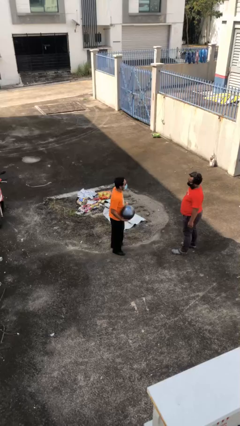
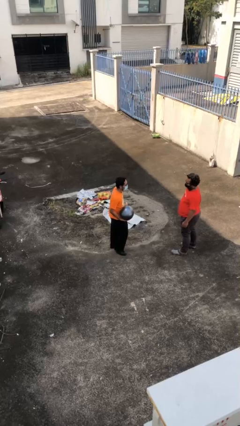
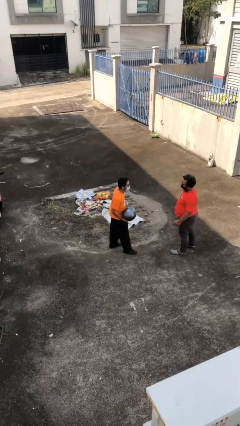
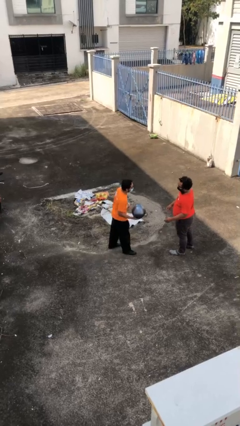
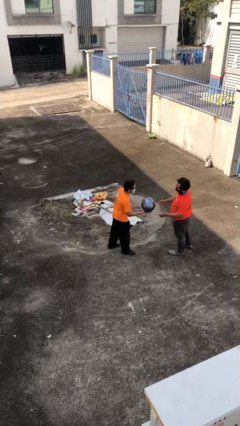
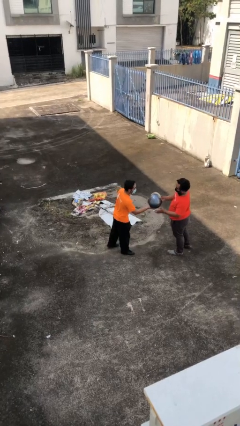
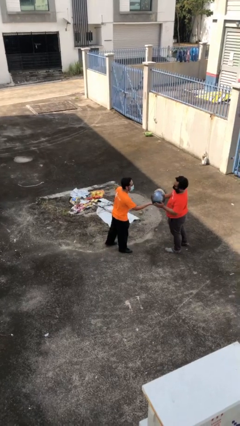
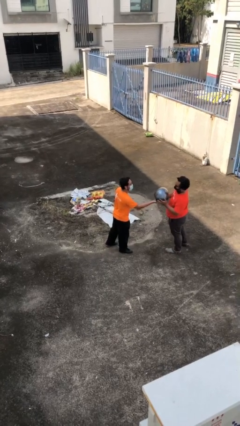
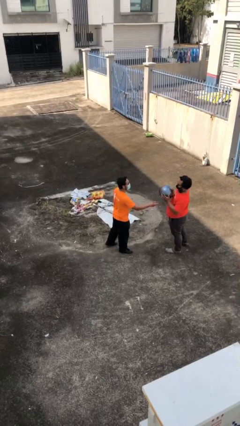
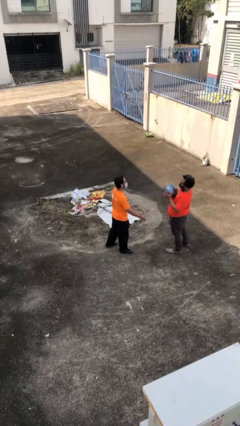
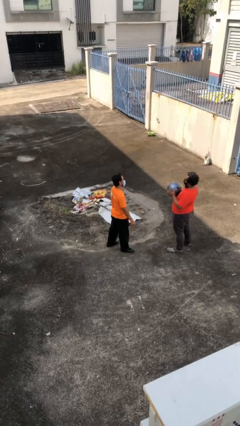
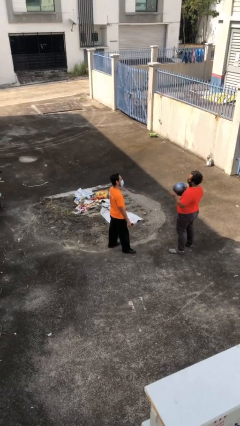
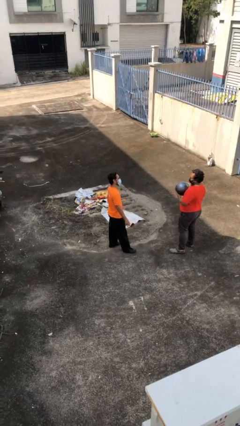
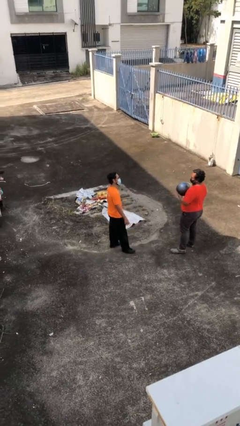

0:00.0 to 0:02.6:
person transfers object to person

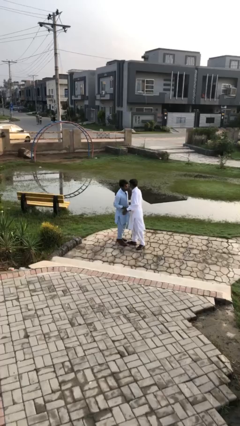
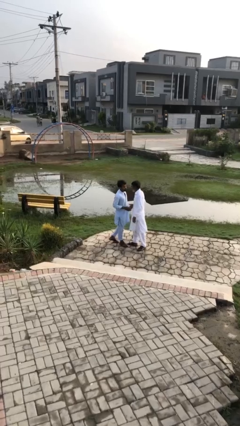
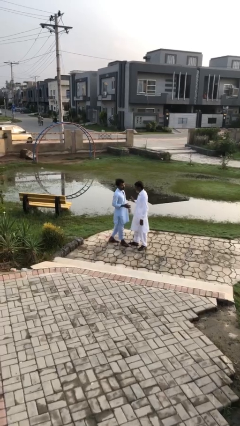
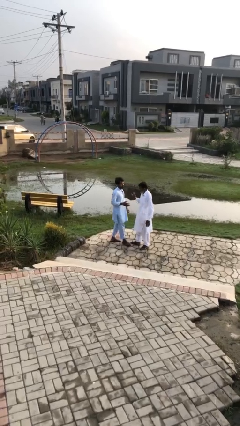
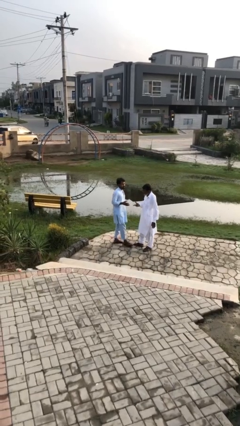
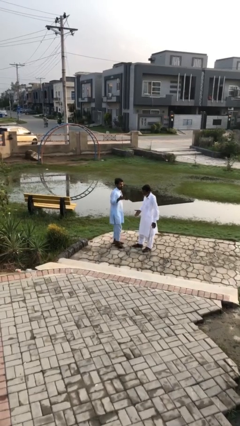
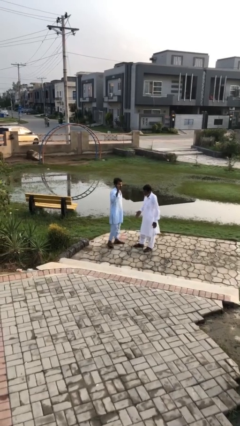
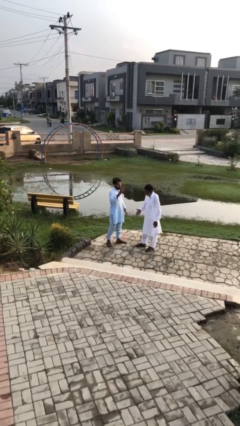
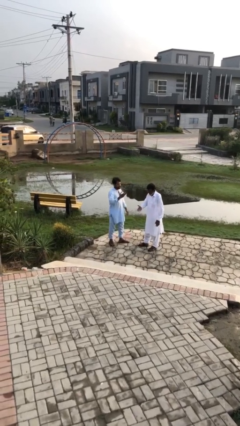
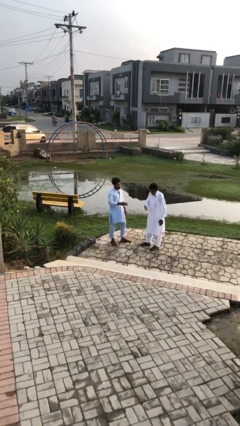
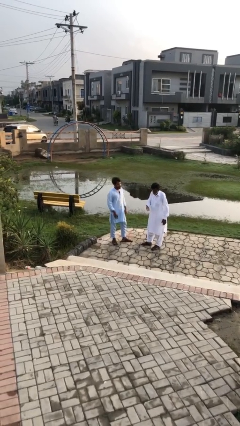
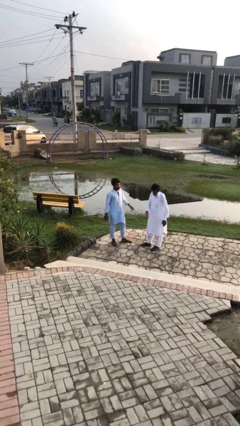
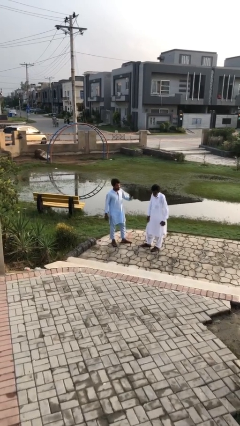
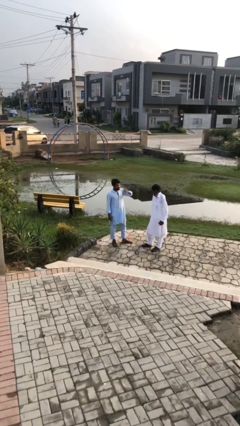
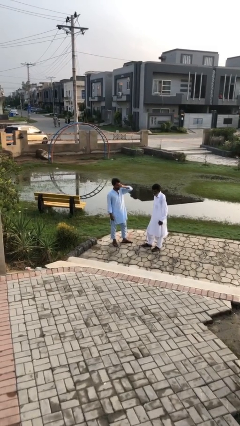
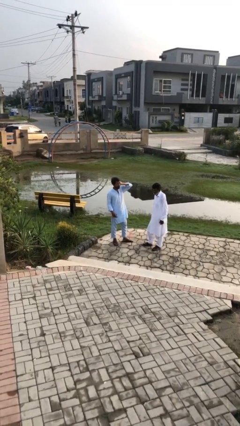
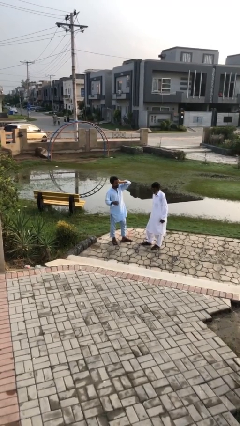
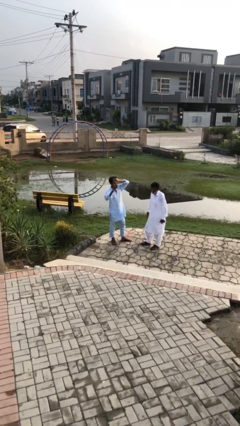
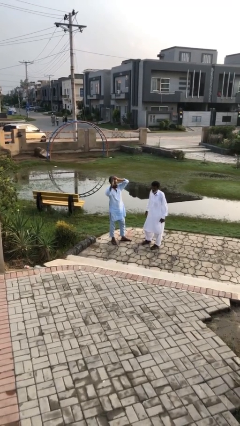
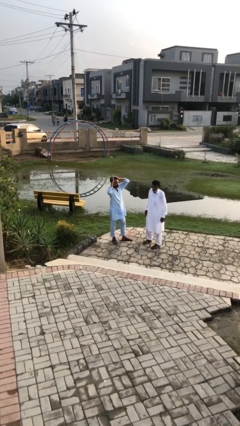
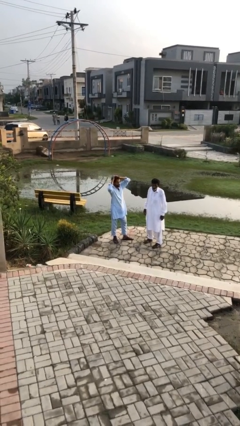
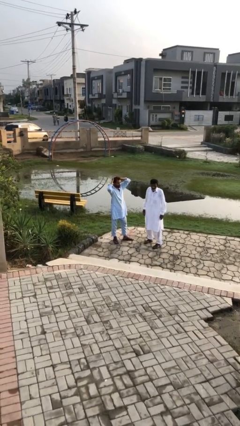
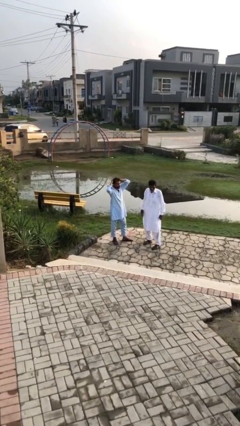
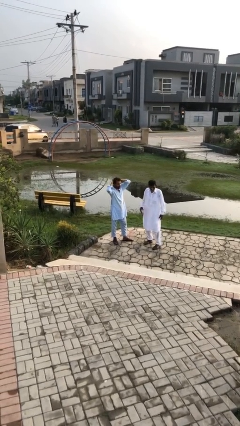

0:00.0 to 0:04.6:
person talks to person

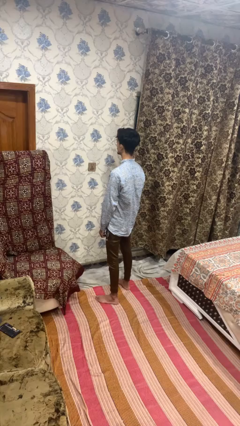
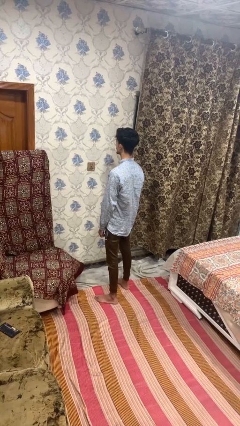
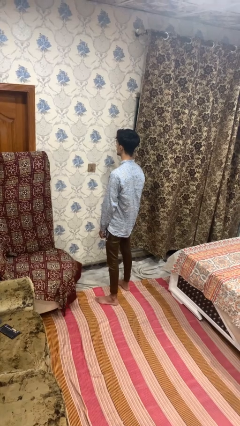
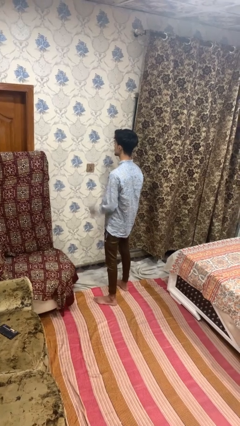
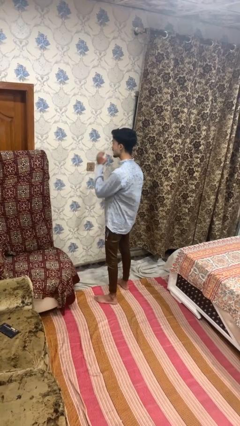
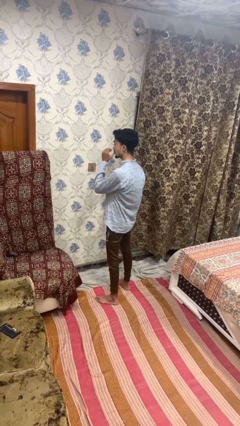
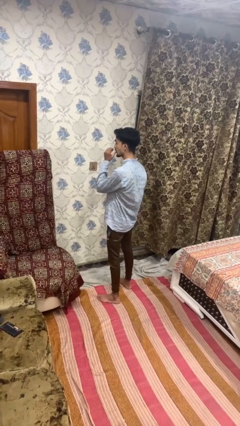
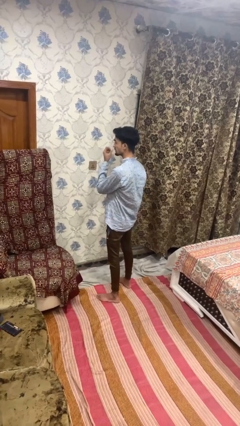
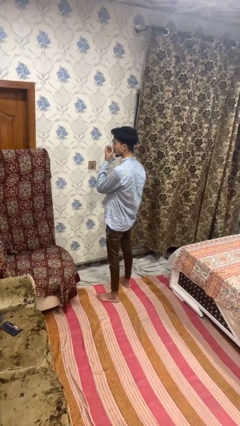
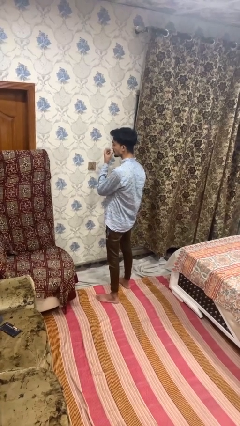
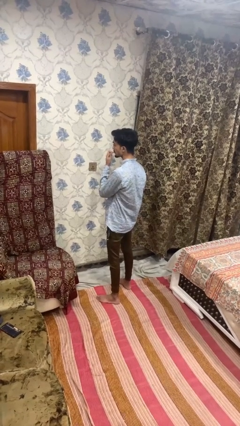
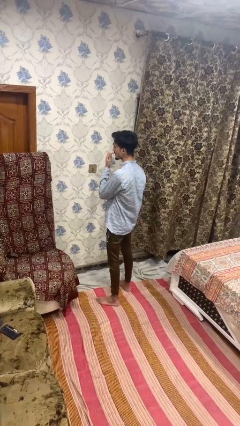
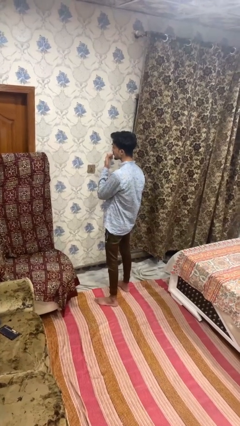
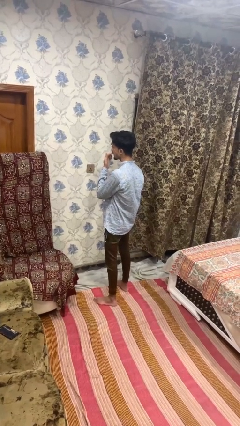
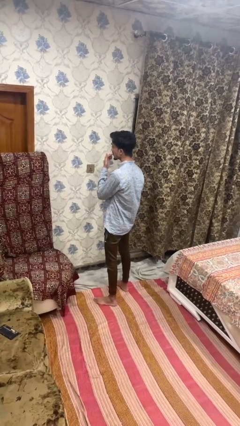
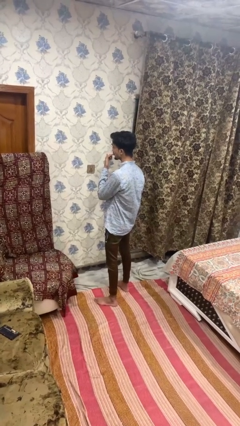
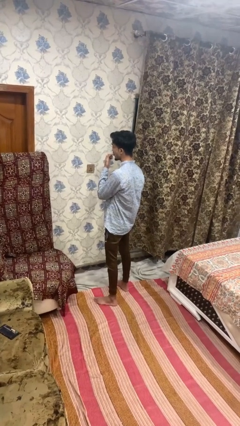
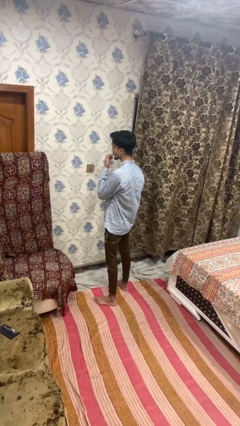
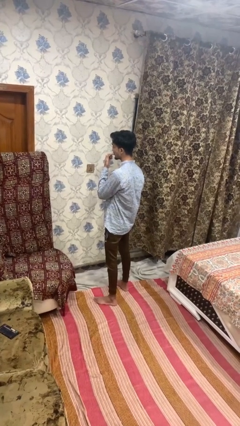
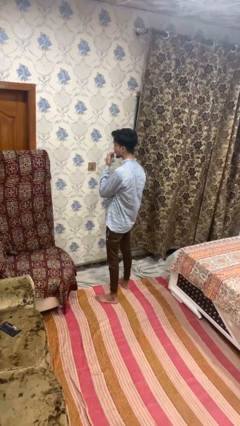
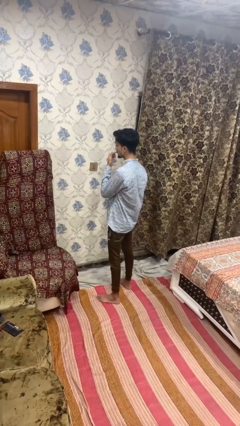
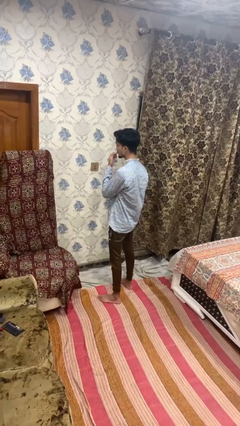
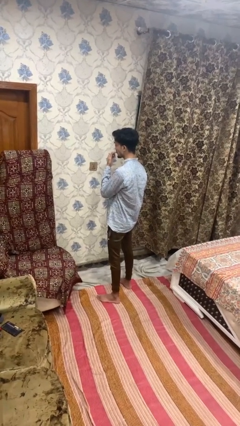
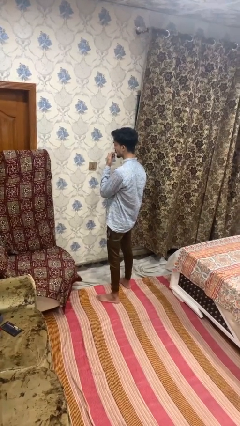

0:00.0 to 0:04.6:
person licks fingers

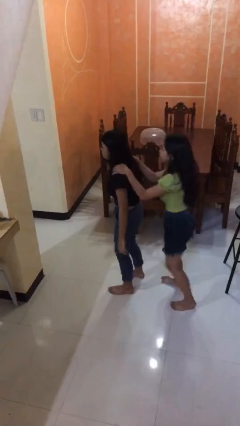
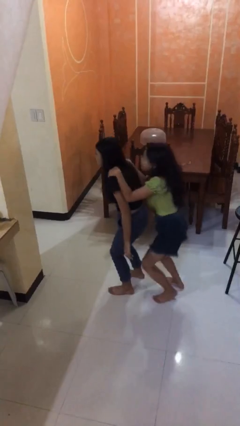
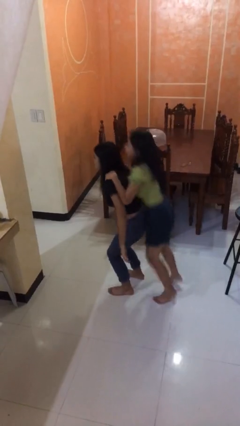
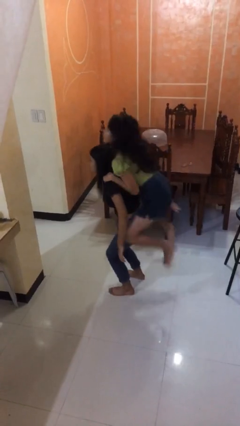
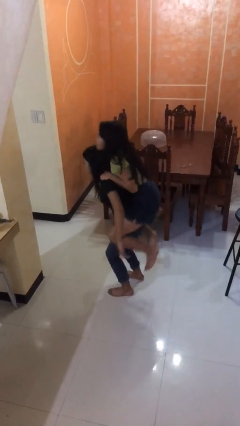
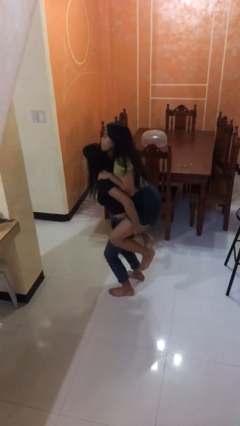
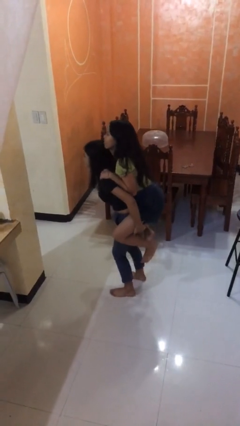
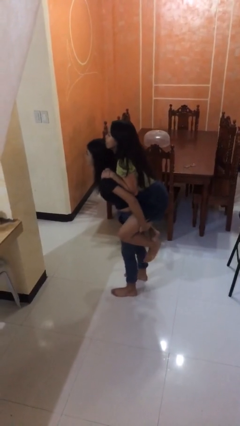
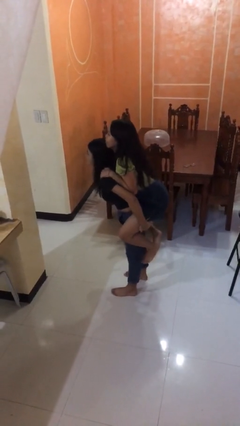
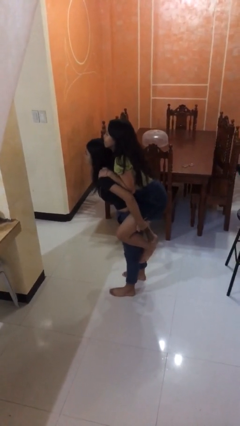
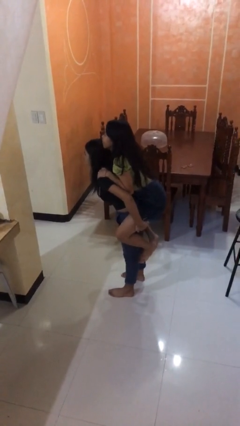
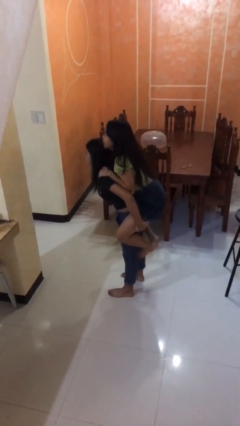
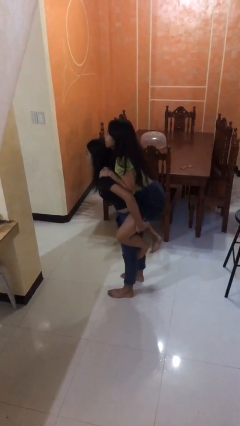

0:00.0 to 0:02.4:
person carries person over shoulder

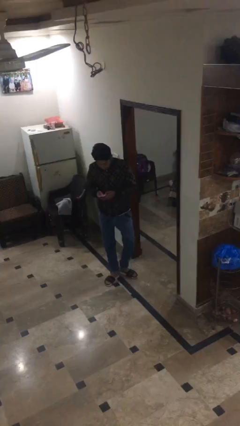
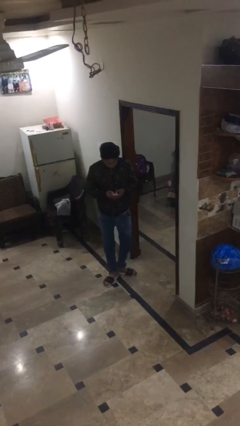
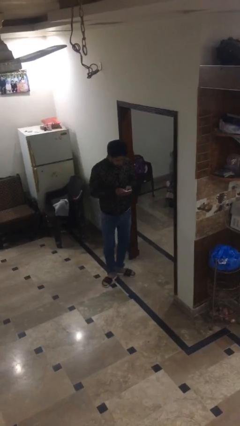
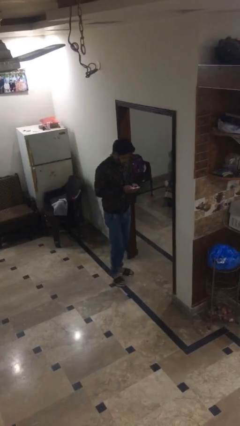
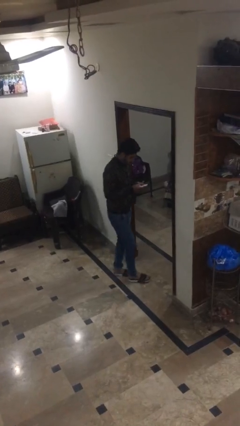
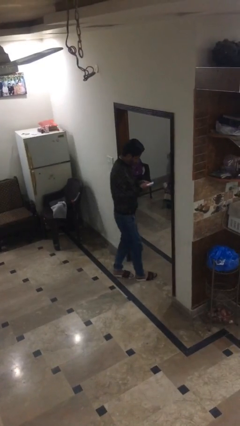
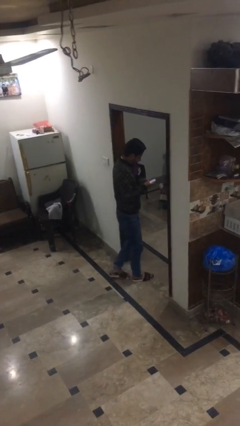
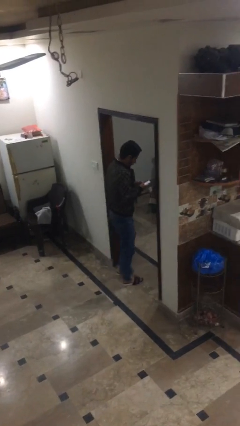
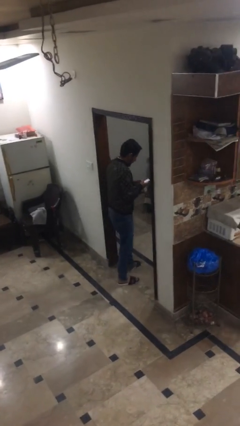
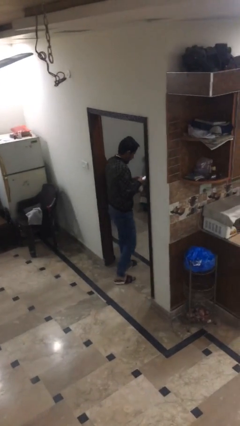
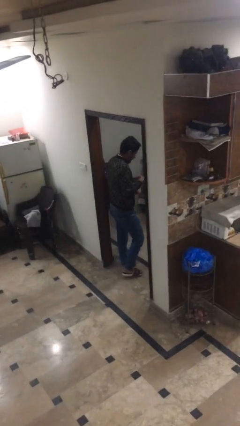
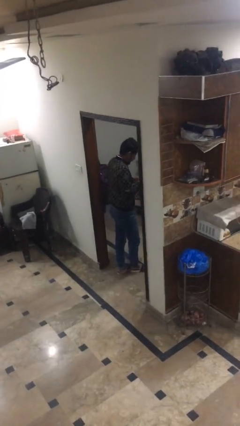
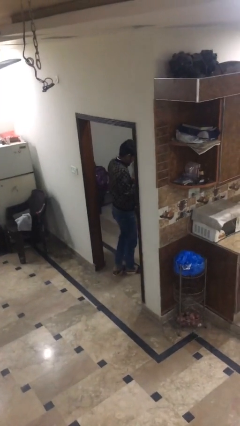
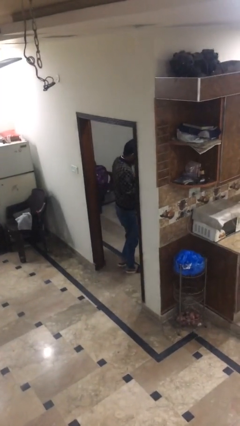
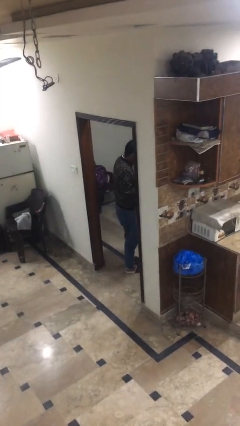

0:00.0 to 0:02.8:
person enters scene through structure

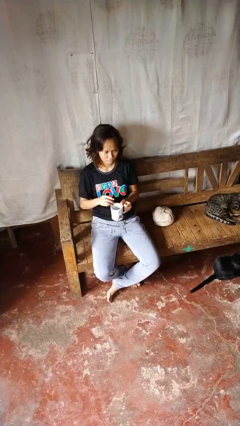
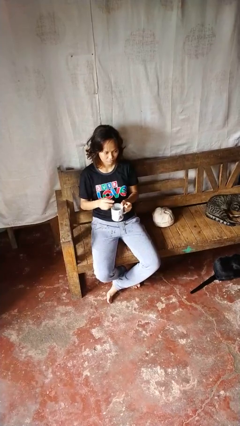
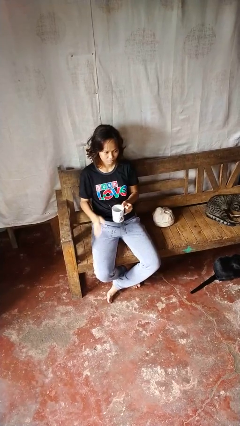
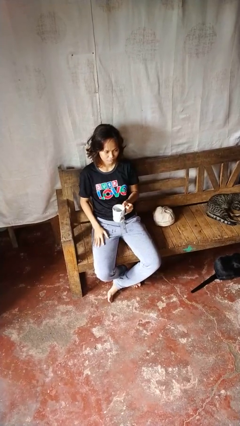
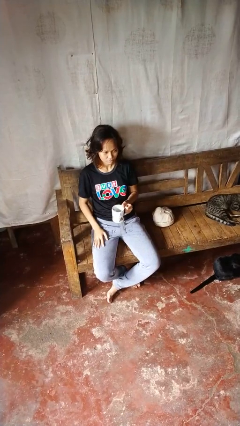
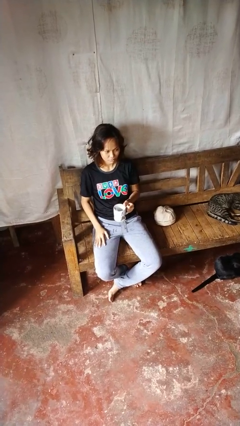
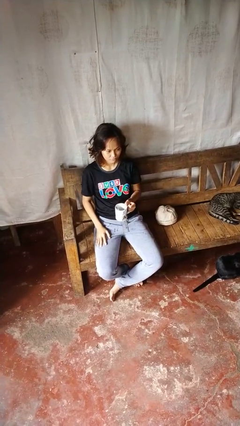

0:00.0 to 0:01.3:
person stirs mug
